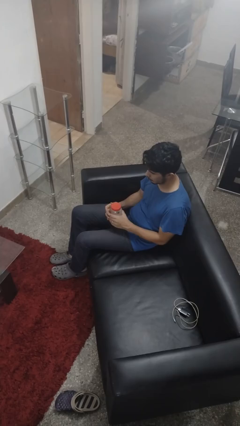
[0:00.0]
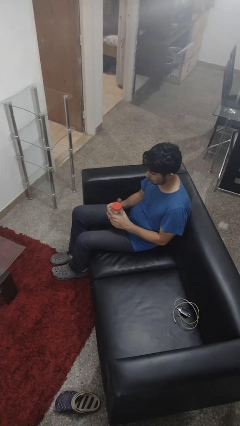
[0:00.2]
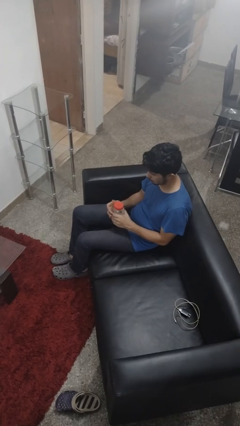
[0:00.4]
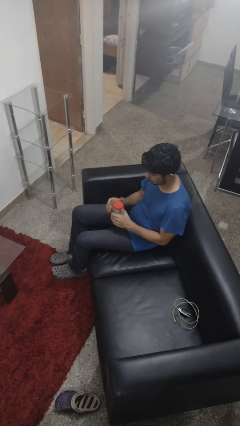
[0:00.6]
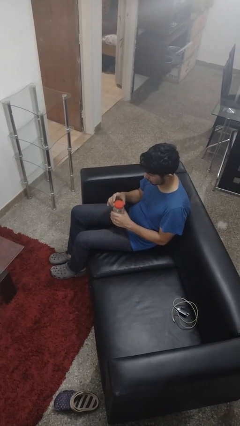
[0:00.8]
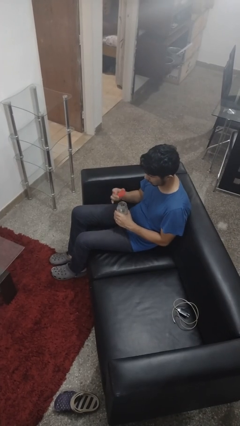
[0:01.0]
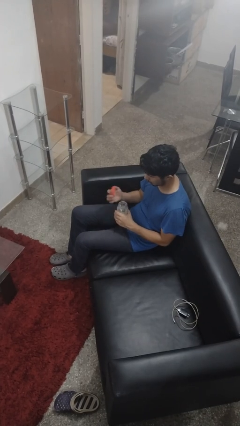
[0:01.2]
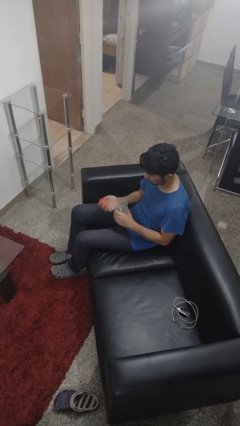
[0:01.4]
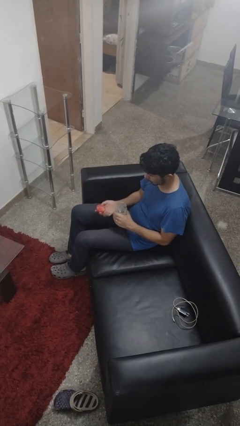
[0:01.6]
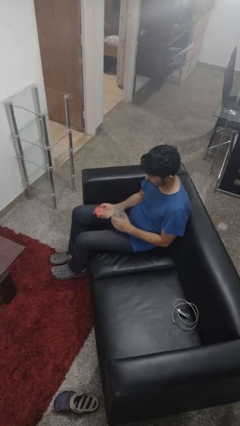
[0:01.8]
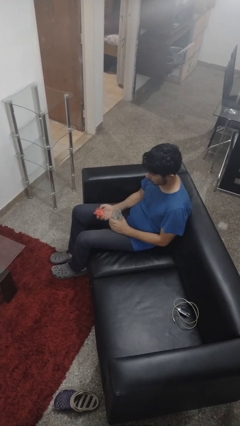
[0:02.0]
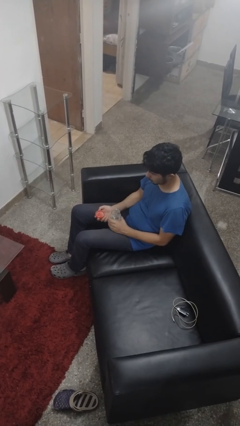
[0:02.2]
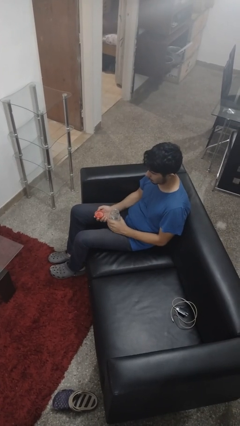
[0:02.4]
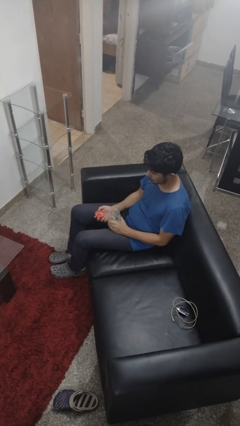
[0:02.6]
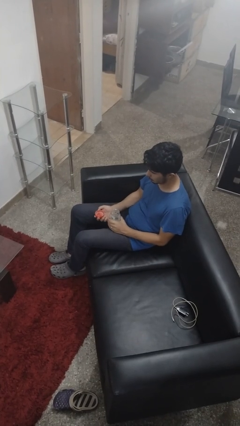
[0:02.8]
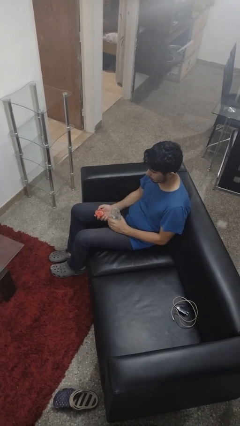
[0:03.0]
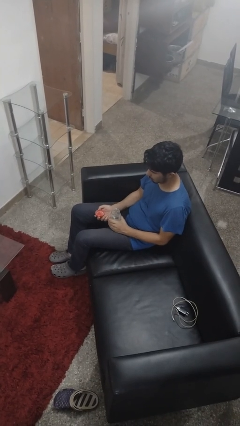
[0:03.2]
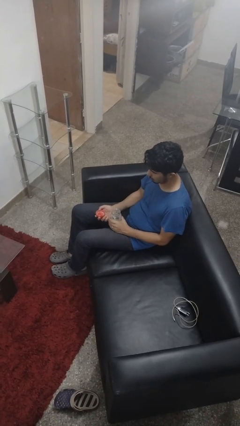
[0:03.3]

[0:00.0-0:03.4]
person opens jar

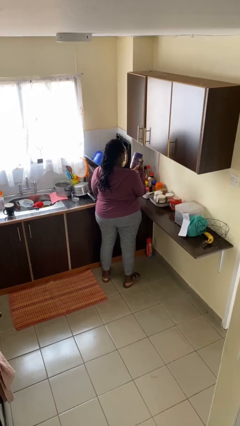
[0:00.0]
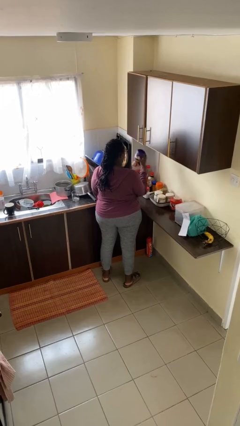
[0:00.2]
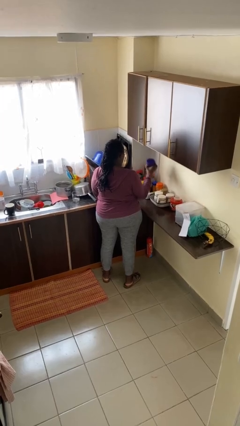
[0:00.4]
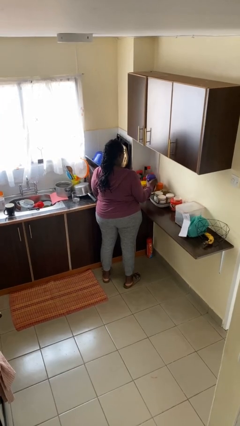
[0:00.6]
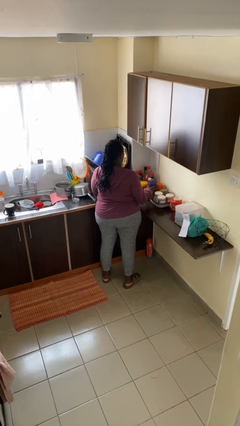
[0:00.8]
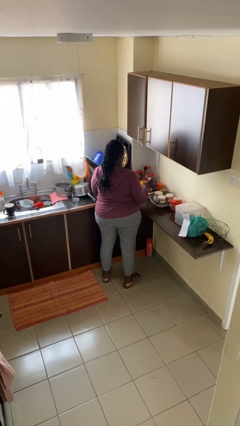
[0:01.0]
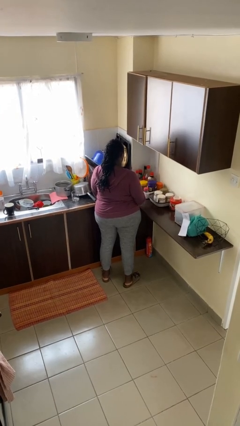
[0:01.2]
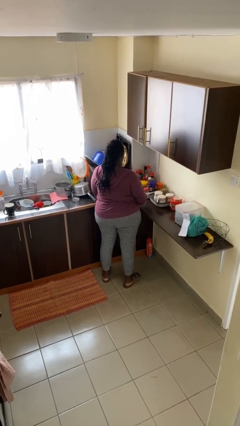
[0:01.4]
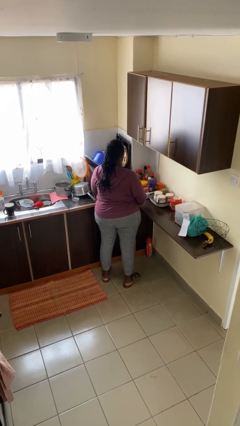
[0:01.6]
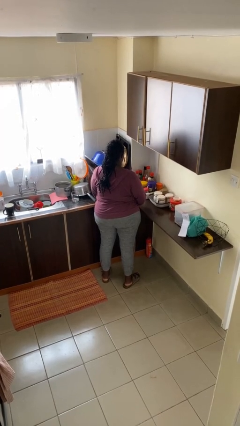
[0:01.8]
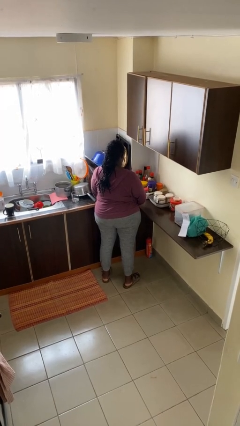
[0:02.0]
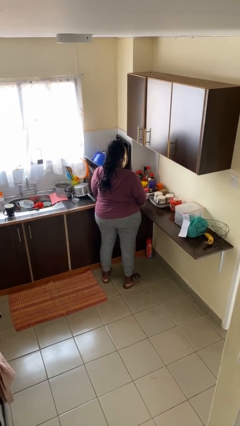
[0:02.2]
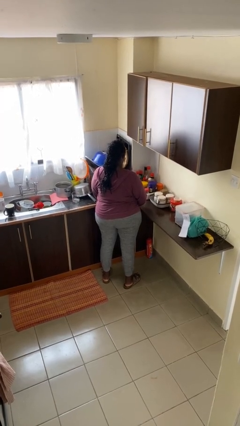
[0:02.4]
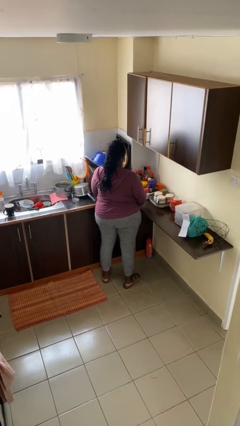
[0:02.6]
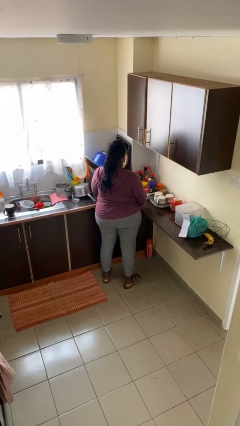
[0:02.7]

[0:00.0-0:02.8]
person puts down object on countertop

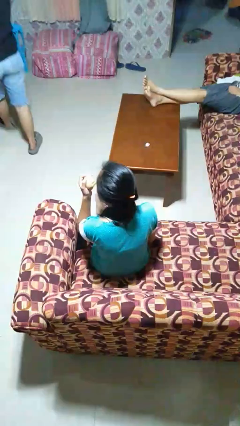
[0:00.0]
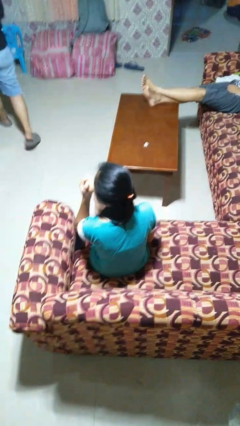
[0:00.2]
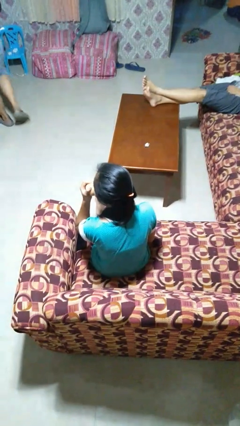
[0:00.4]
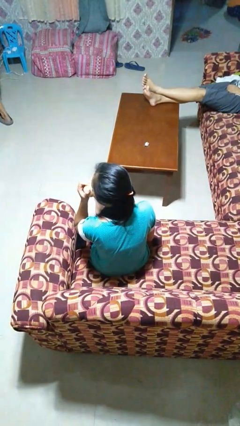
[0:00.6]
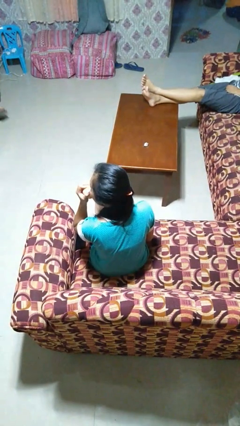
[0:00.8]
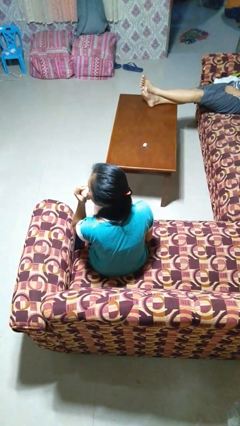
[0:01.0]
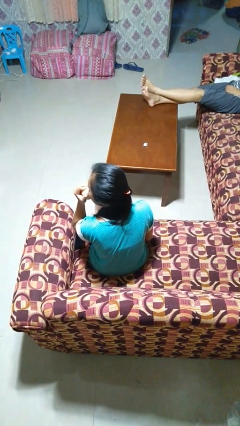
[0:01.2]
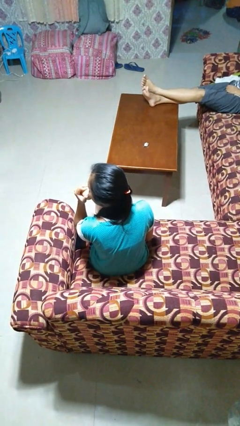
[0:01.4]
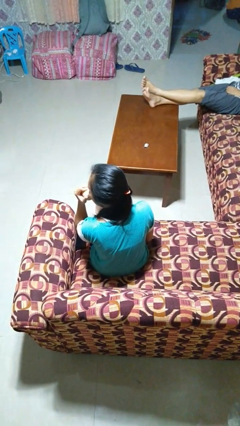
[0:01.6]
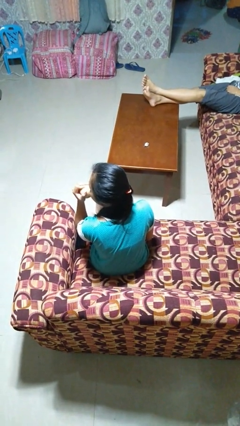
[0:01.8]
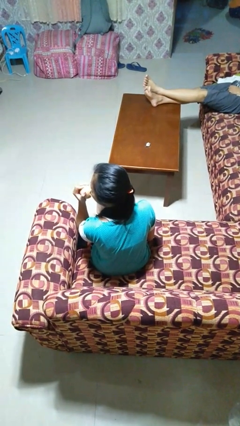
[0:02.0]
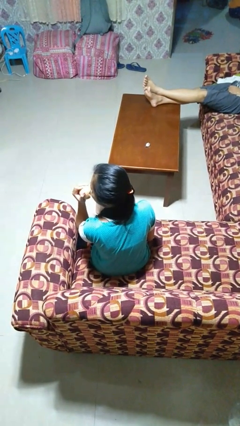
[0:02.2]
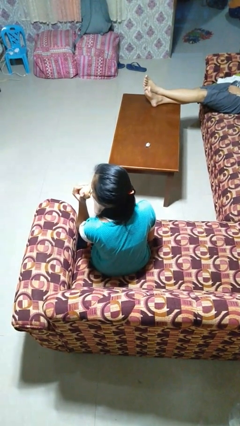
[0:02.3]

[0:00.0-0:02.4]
person eats apple

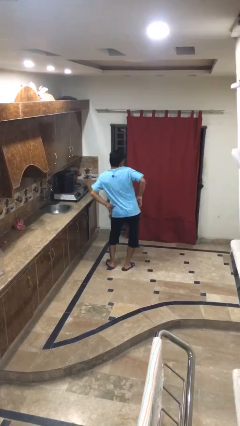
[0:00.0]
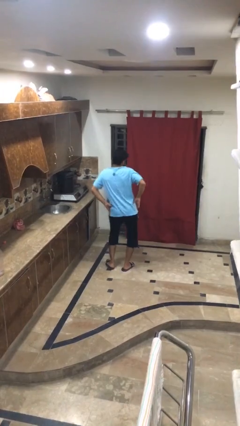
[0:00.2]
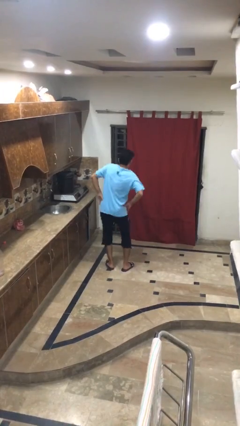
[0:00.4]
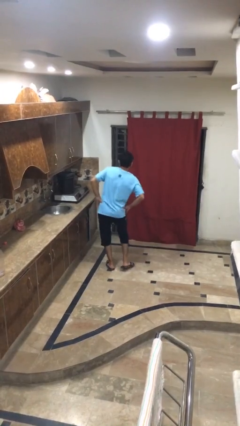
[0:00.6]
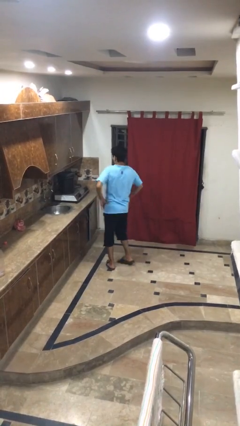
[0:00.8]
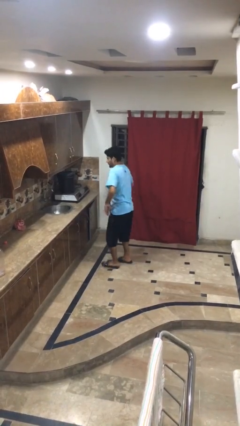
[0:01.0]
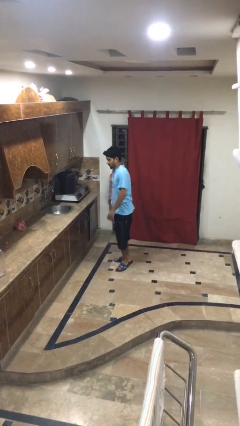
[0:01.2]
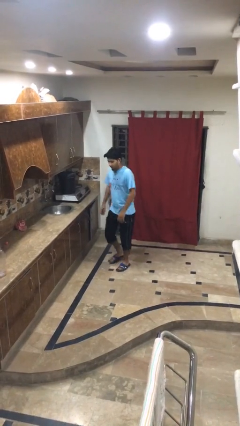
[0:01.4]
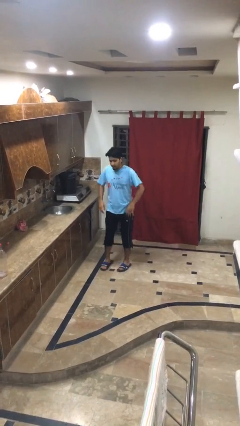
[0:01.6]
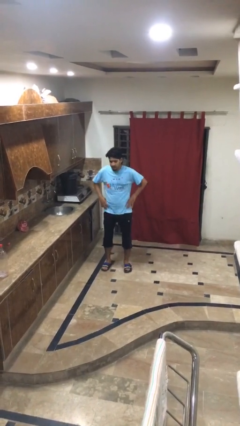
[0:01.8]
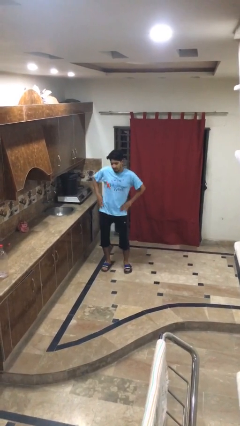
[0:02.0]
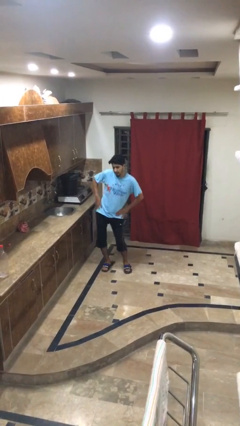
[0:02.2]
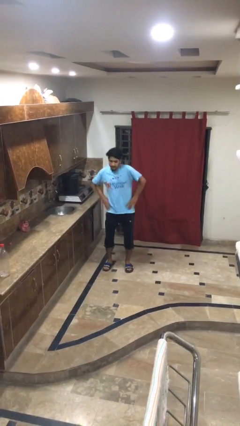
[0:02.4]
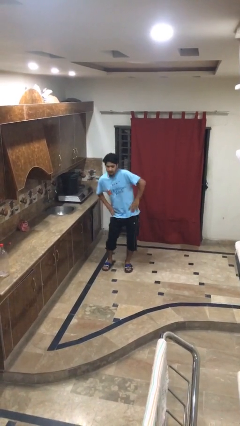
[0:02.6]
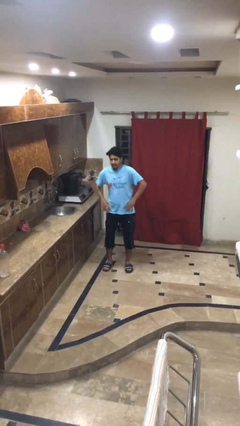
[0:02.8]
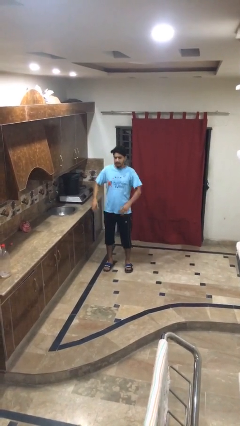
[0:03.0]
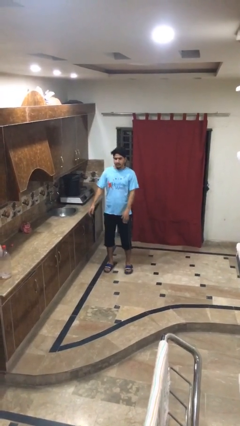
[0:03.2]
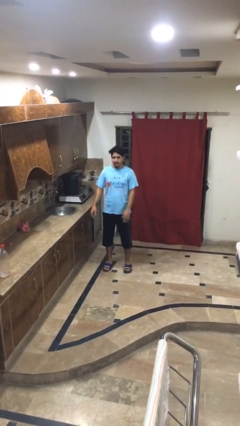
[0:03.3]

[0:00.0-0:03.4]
person wiggles hips

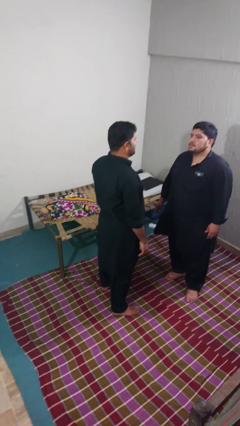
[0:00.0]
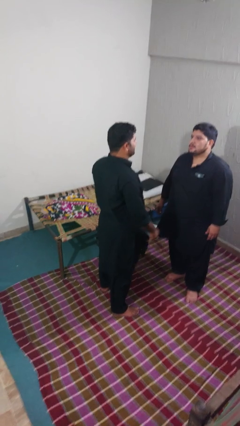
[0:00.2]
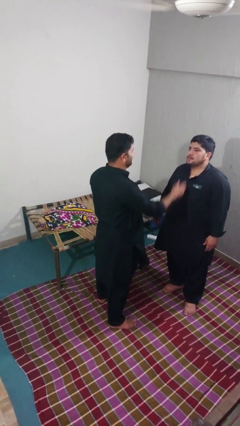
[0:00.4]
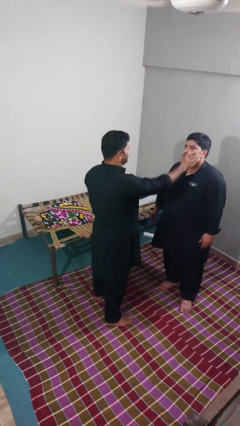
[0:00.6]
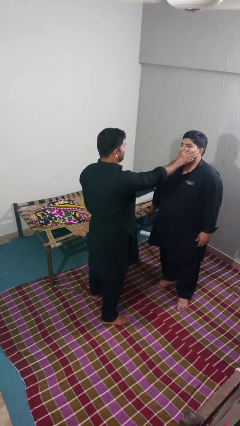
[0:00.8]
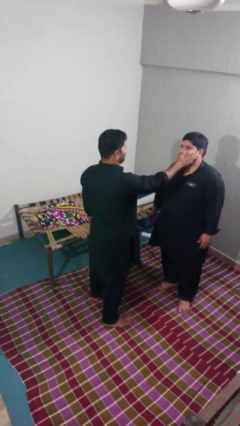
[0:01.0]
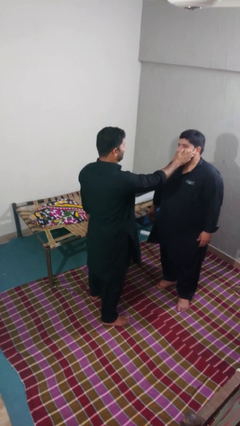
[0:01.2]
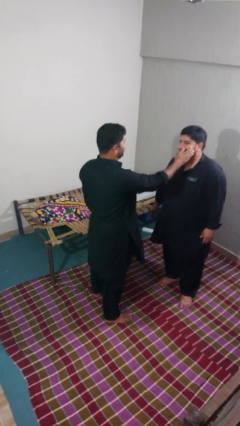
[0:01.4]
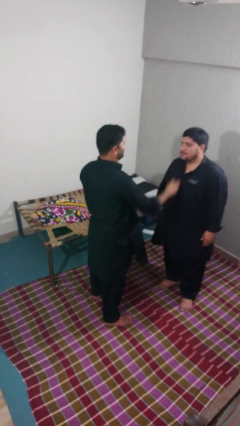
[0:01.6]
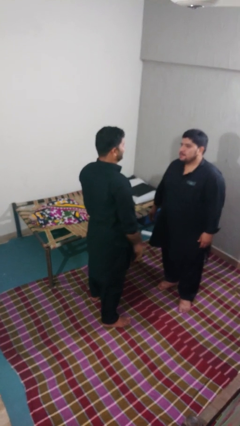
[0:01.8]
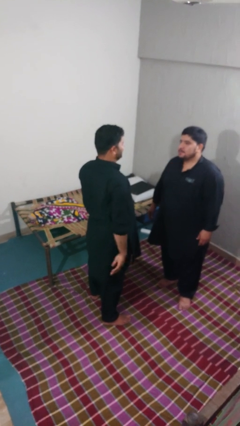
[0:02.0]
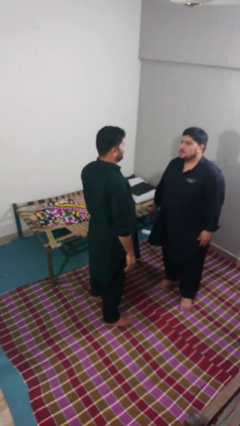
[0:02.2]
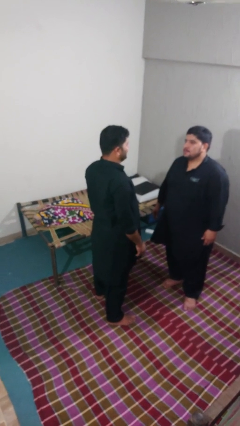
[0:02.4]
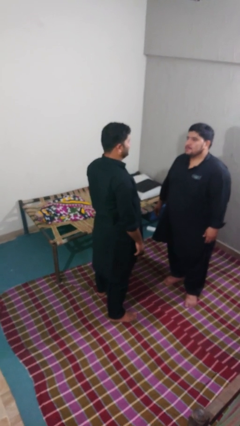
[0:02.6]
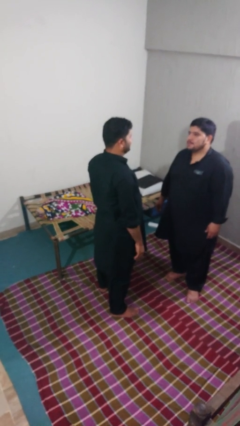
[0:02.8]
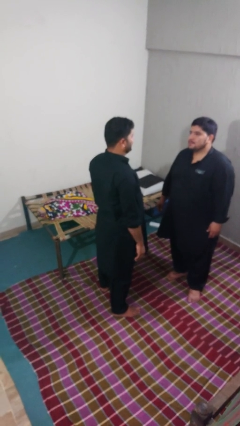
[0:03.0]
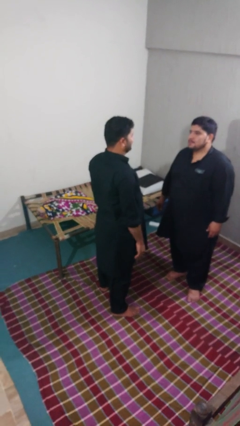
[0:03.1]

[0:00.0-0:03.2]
person touches face of person

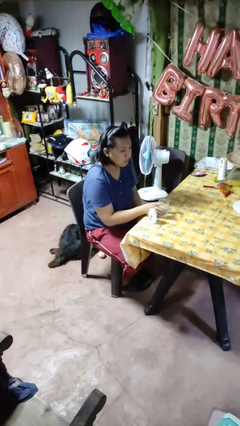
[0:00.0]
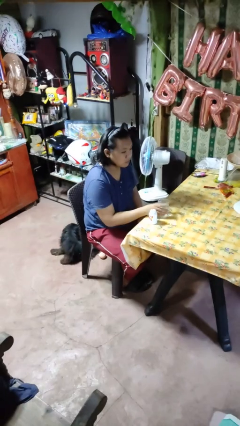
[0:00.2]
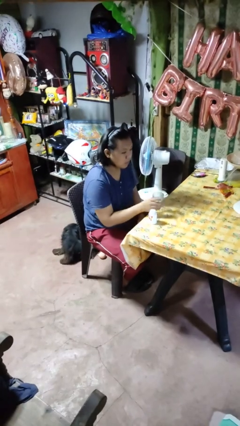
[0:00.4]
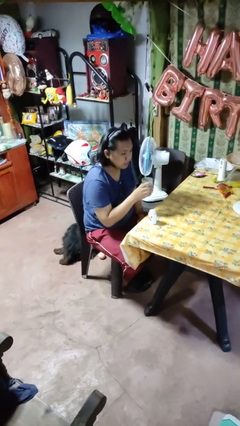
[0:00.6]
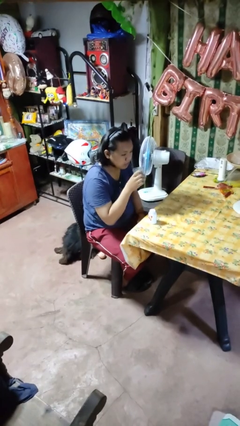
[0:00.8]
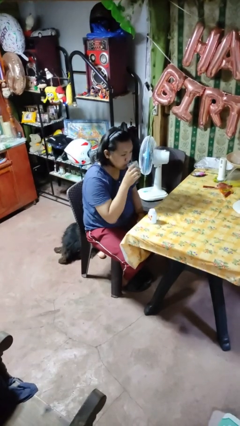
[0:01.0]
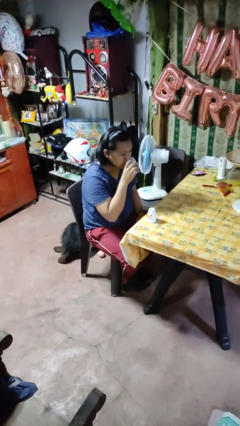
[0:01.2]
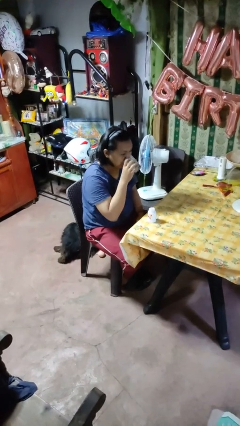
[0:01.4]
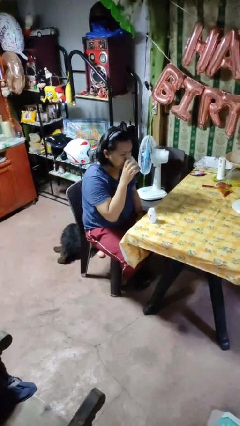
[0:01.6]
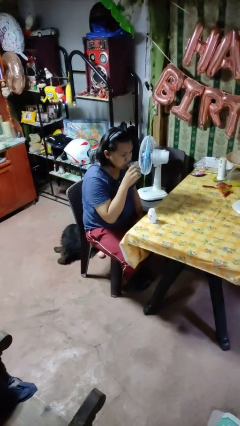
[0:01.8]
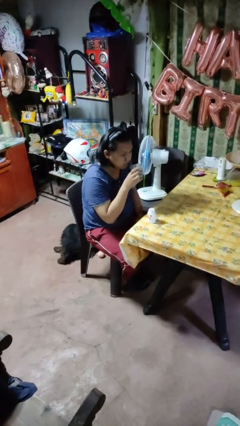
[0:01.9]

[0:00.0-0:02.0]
person drinks from cup
